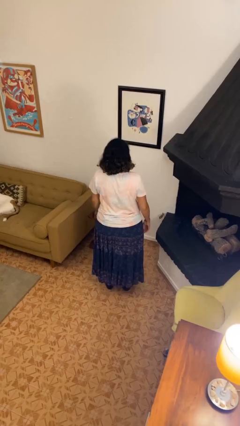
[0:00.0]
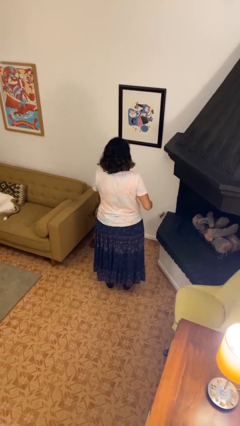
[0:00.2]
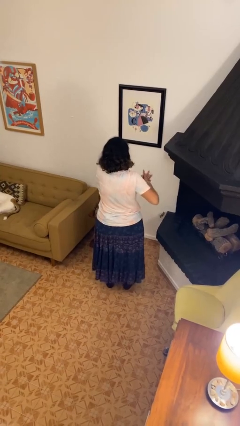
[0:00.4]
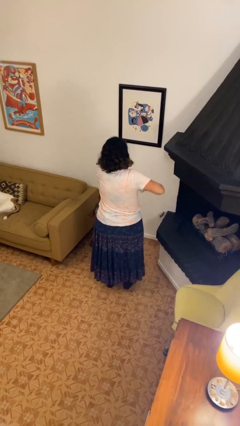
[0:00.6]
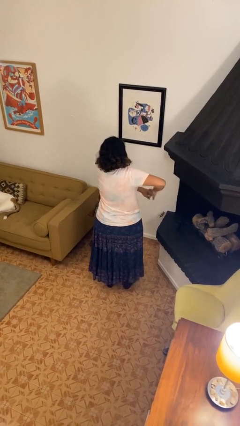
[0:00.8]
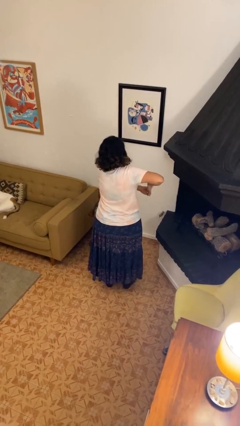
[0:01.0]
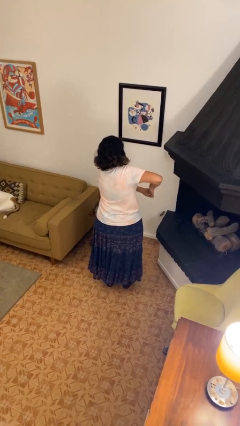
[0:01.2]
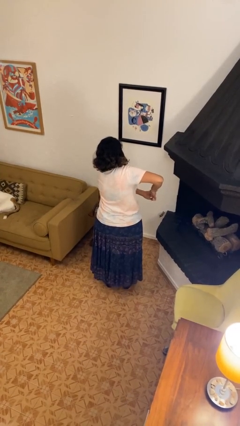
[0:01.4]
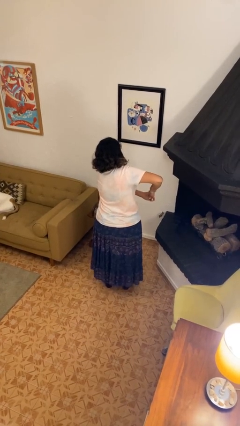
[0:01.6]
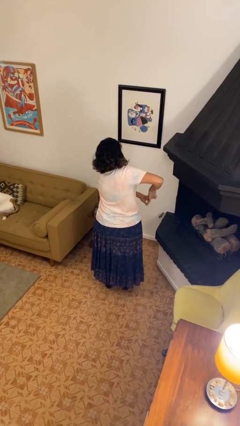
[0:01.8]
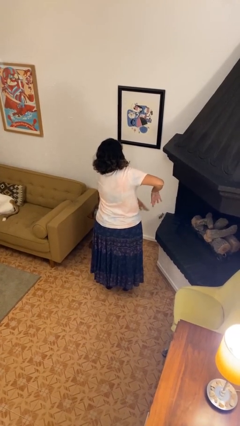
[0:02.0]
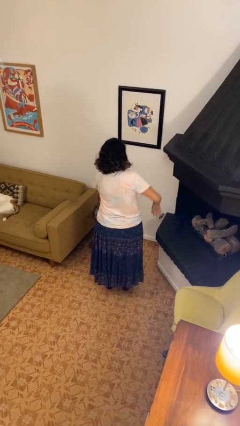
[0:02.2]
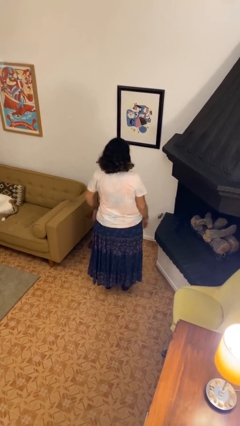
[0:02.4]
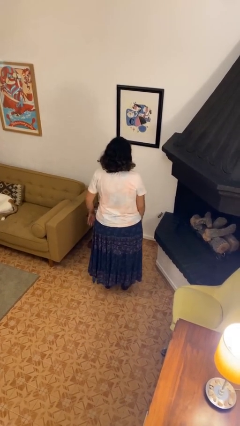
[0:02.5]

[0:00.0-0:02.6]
person cracks knuckles

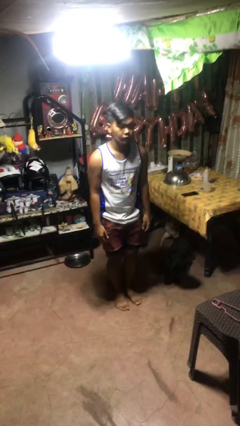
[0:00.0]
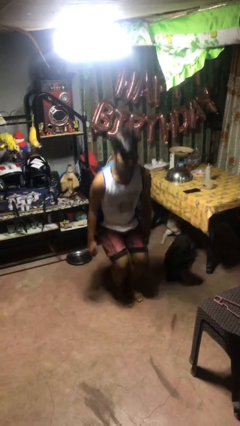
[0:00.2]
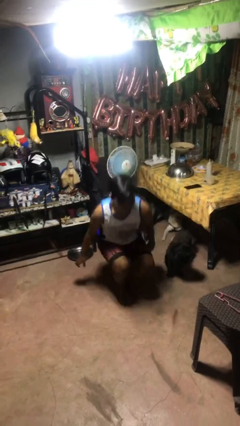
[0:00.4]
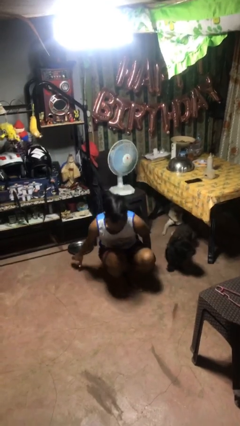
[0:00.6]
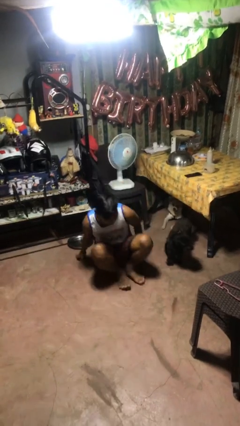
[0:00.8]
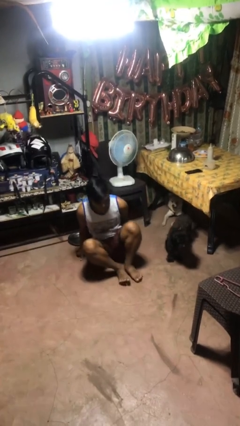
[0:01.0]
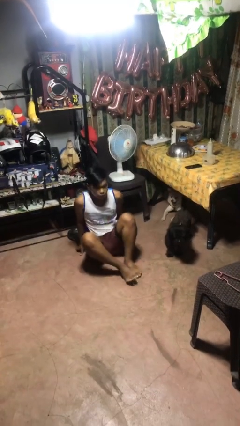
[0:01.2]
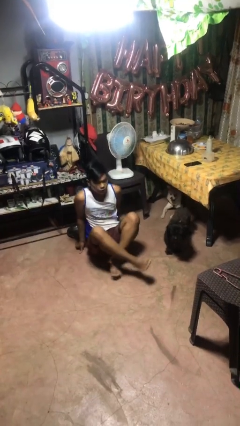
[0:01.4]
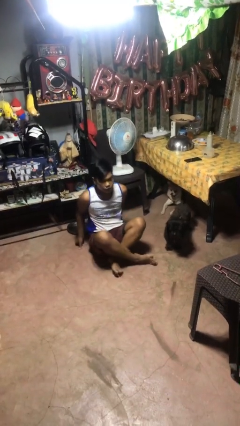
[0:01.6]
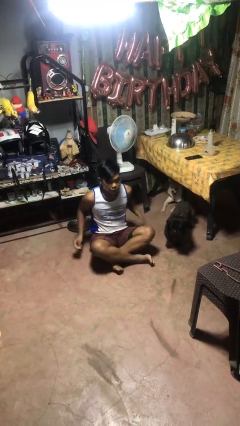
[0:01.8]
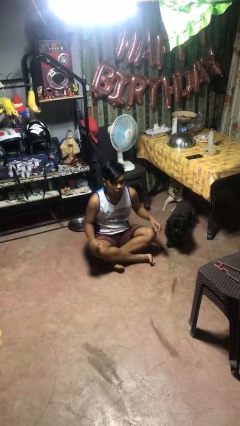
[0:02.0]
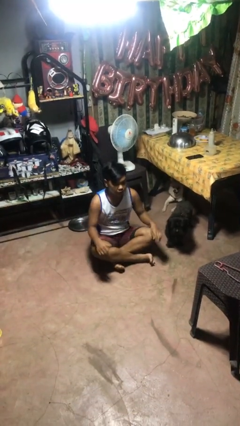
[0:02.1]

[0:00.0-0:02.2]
person sits crisscross

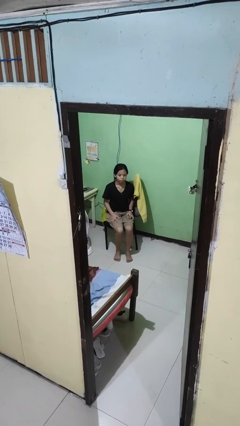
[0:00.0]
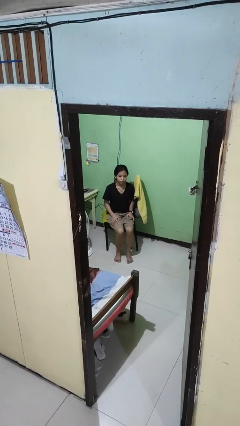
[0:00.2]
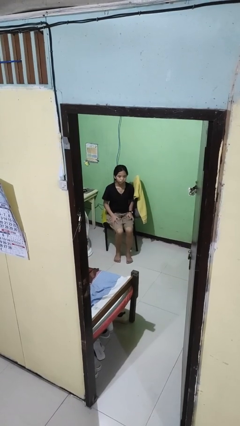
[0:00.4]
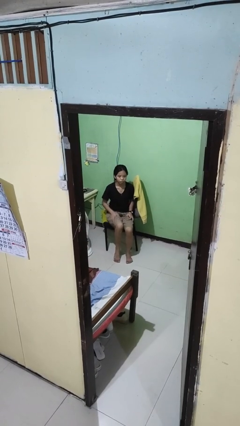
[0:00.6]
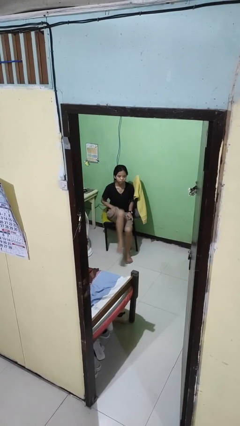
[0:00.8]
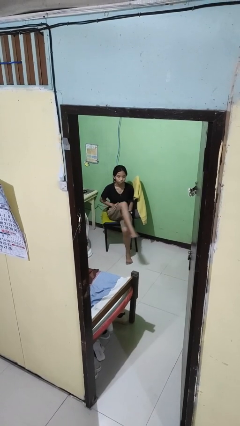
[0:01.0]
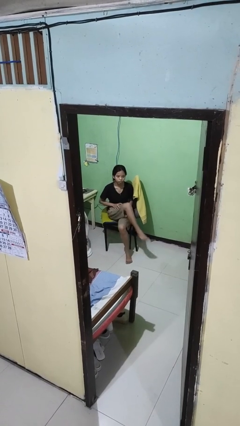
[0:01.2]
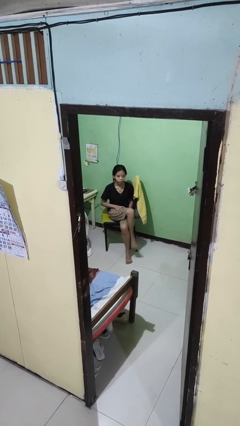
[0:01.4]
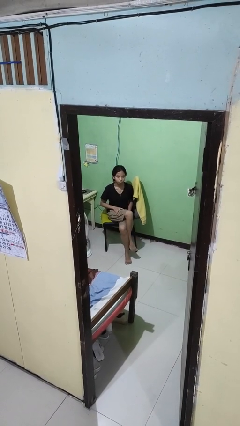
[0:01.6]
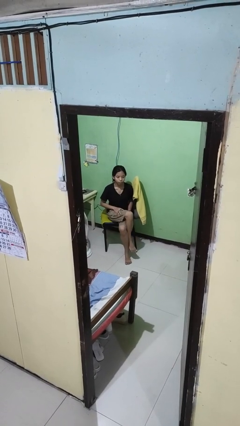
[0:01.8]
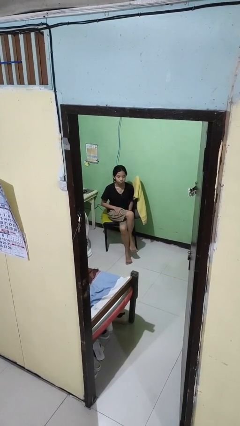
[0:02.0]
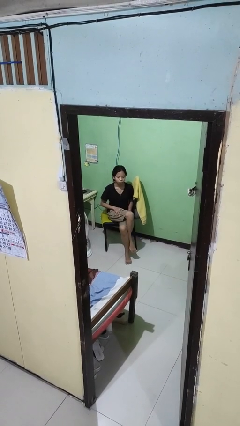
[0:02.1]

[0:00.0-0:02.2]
person crosses legs

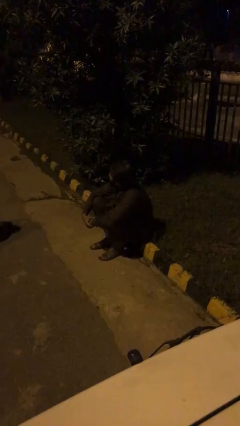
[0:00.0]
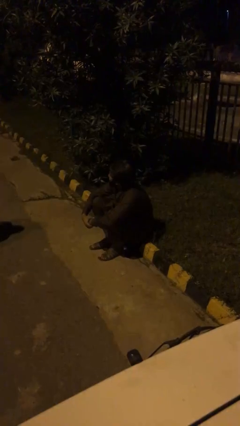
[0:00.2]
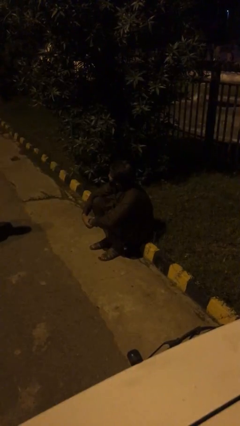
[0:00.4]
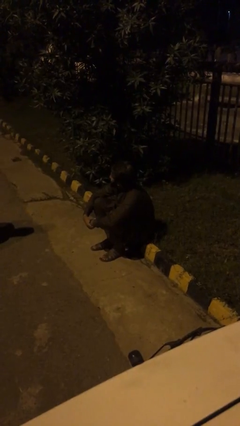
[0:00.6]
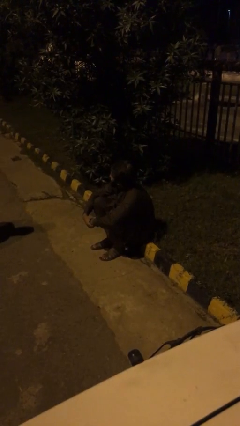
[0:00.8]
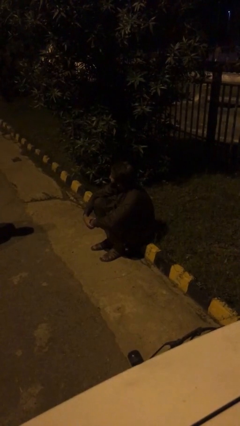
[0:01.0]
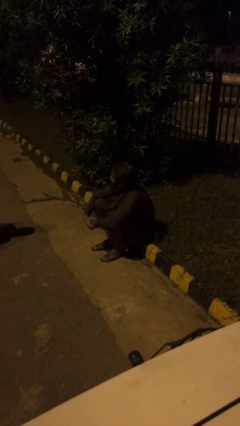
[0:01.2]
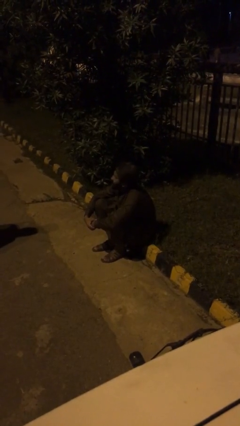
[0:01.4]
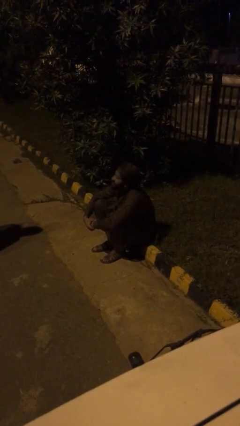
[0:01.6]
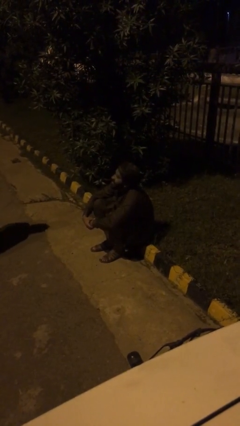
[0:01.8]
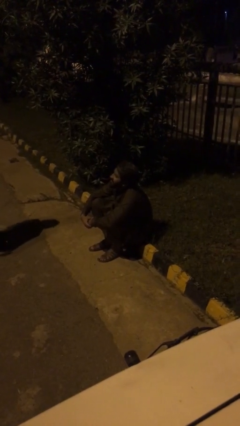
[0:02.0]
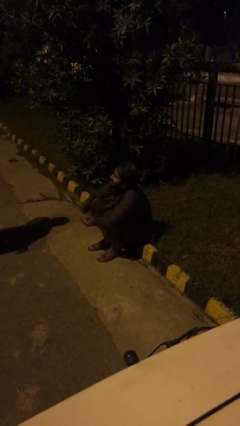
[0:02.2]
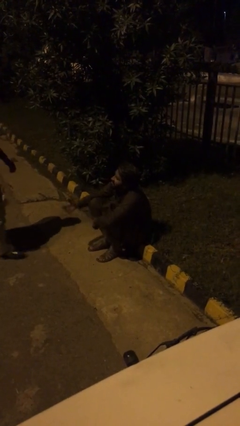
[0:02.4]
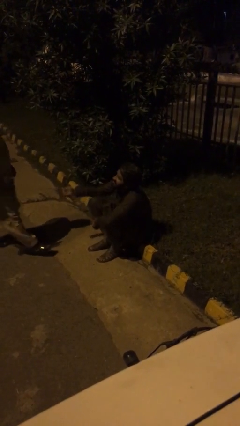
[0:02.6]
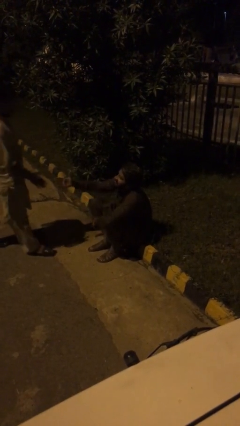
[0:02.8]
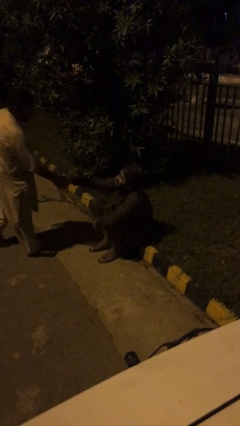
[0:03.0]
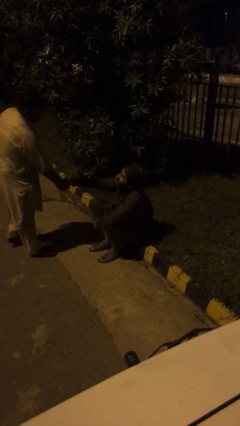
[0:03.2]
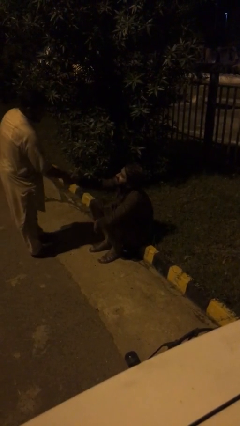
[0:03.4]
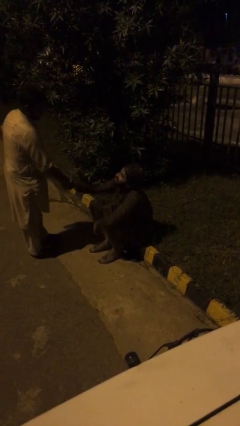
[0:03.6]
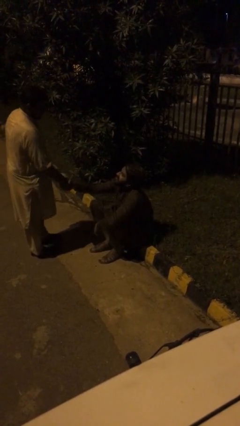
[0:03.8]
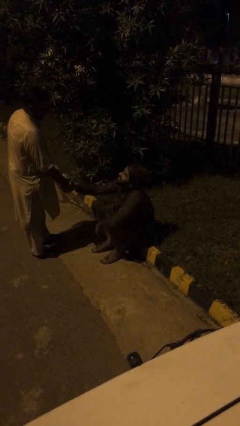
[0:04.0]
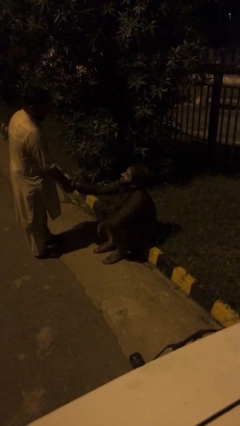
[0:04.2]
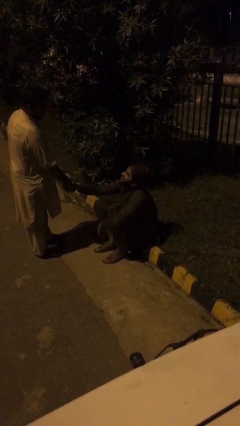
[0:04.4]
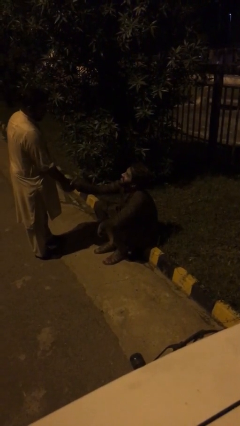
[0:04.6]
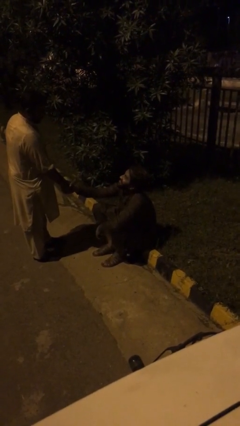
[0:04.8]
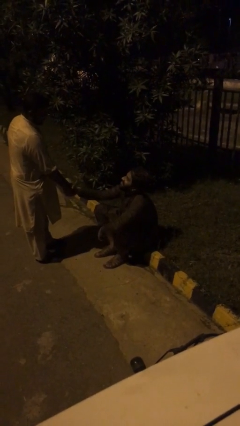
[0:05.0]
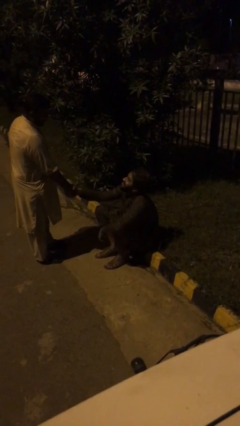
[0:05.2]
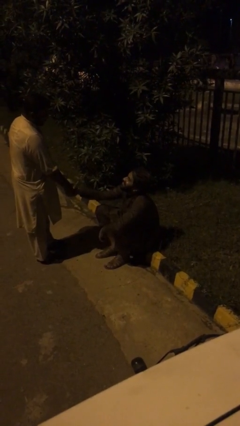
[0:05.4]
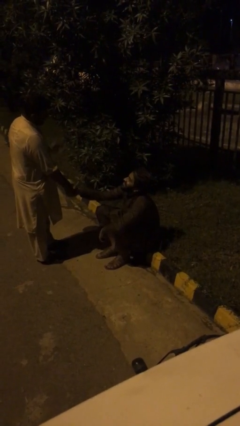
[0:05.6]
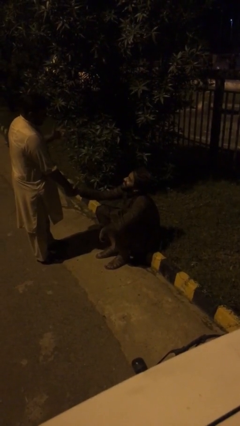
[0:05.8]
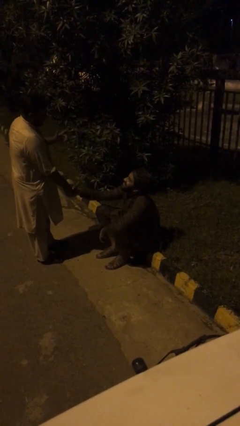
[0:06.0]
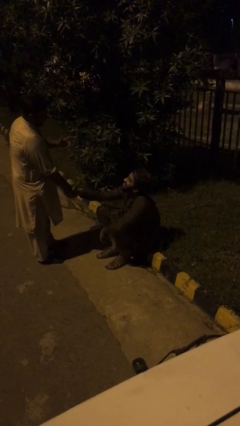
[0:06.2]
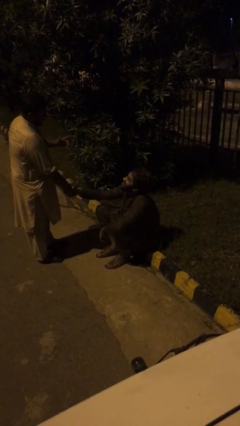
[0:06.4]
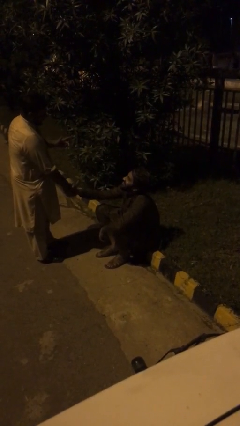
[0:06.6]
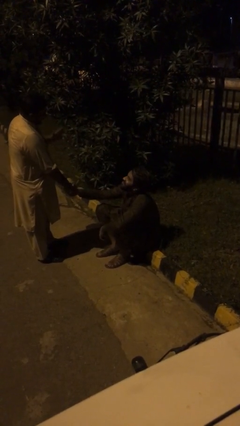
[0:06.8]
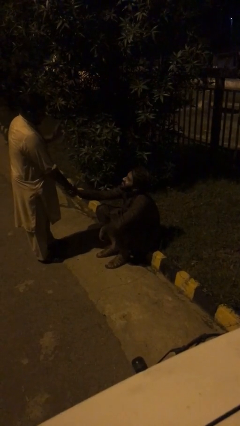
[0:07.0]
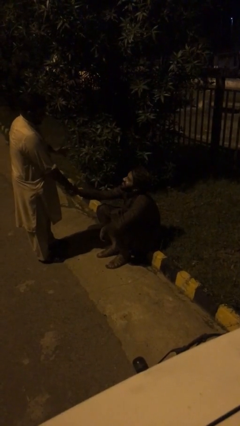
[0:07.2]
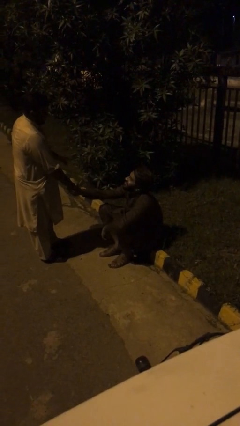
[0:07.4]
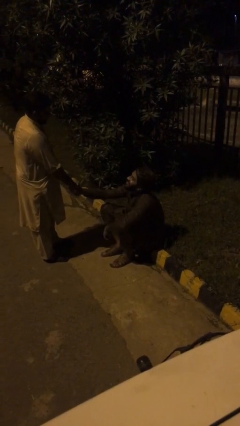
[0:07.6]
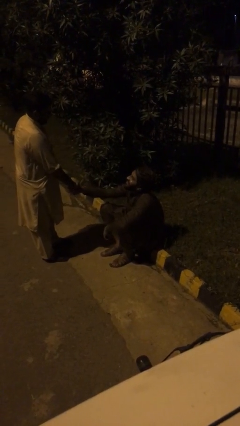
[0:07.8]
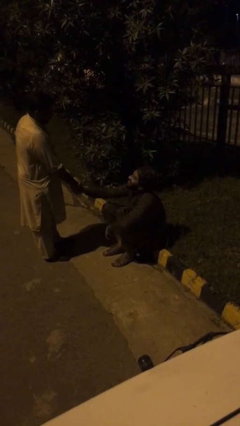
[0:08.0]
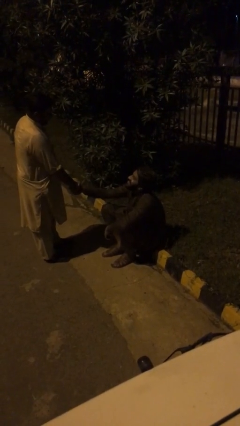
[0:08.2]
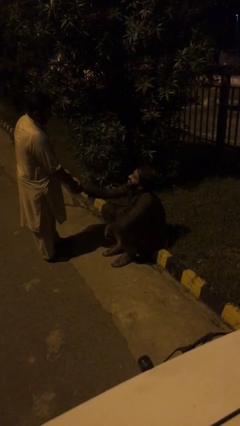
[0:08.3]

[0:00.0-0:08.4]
person shakes hand

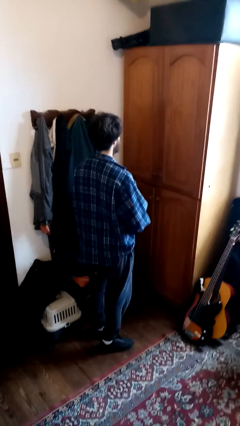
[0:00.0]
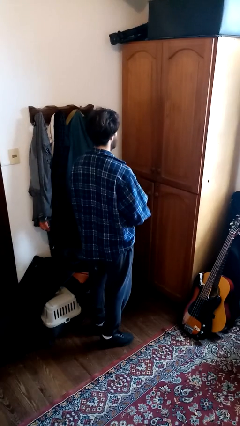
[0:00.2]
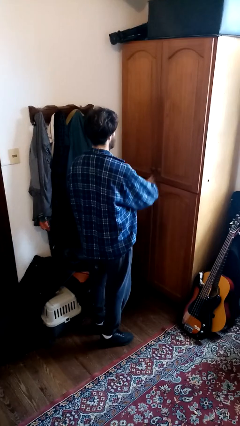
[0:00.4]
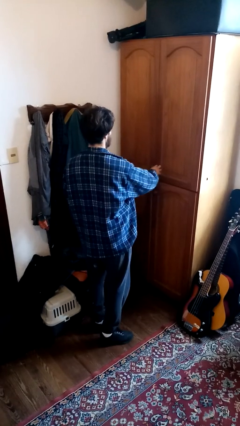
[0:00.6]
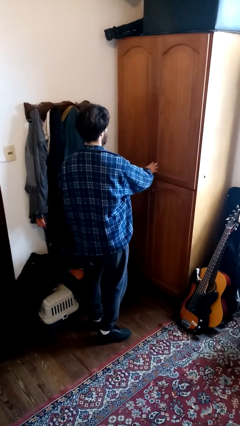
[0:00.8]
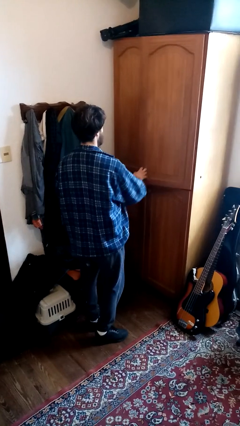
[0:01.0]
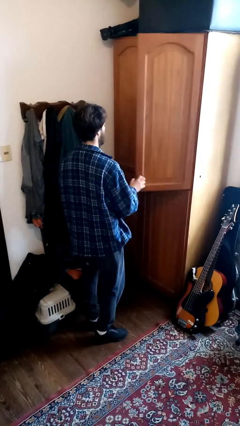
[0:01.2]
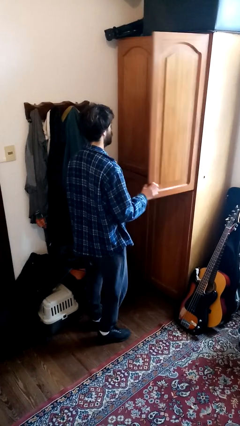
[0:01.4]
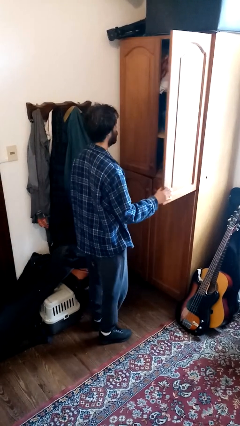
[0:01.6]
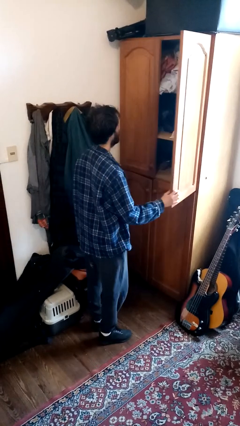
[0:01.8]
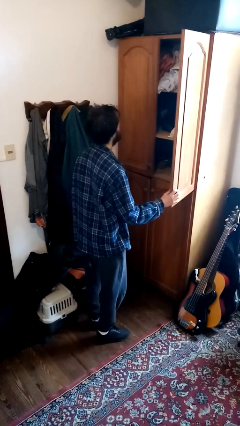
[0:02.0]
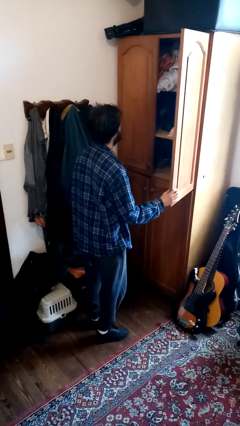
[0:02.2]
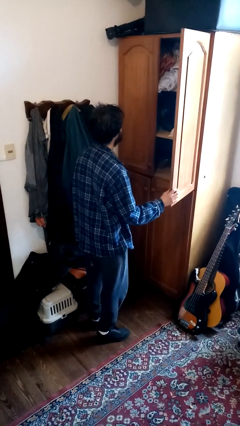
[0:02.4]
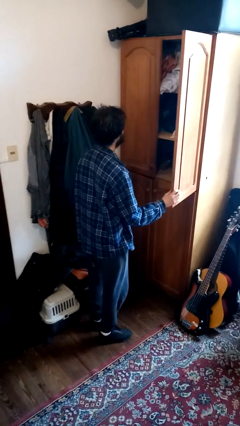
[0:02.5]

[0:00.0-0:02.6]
person opens dresser drawer
